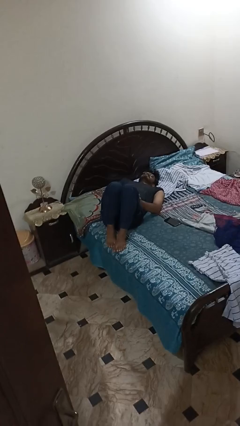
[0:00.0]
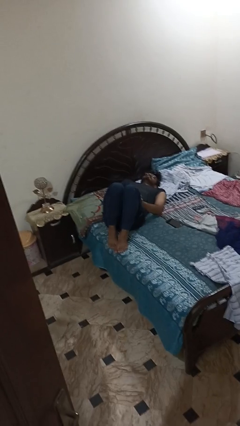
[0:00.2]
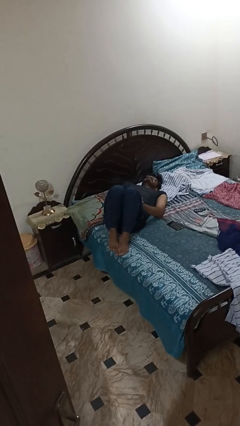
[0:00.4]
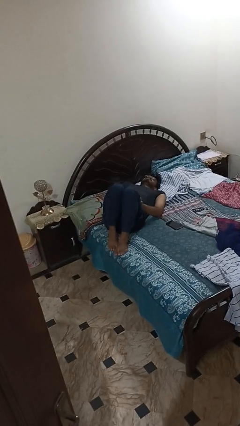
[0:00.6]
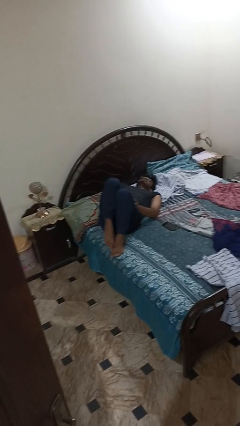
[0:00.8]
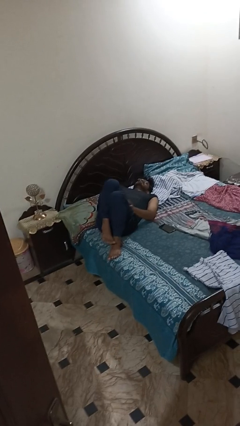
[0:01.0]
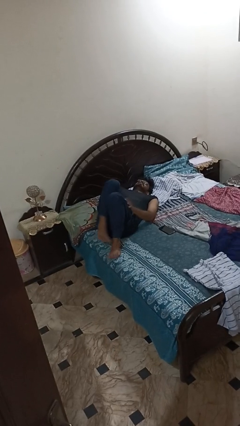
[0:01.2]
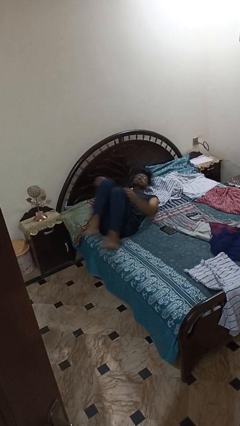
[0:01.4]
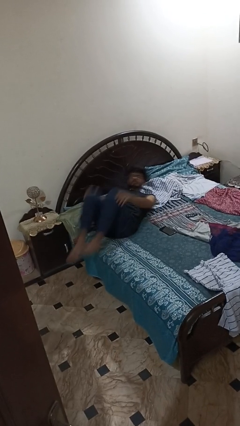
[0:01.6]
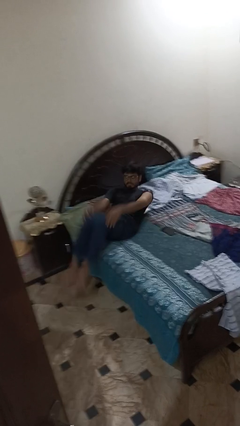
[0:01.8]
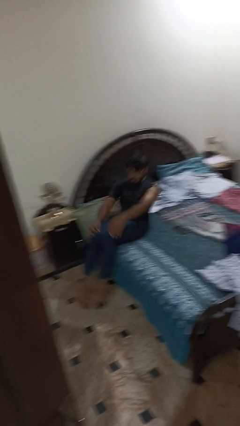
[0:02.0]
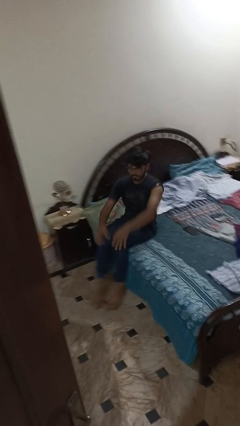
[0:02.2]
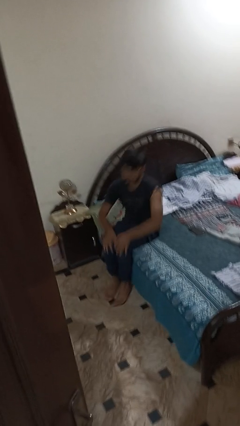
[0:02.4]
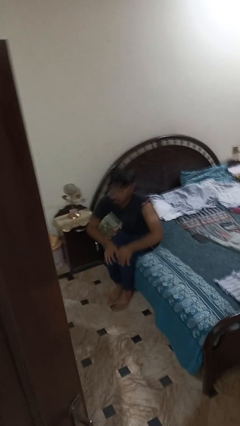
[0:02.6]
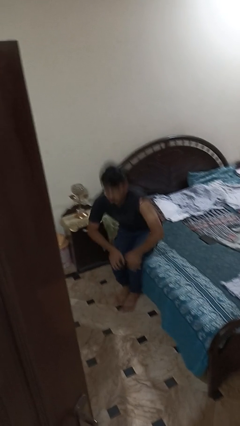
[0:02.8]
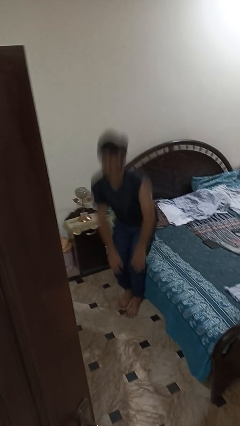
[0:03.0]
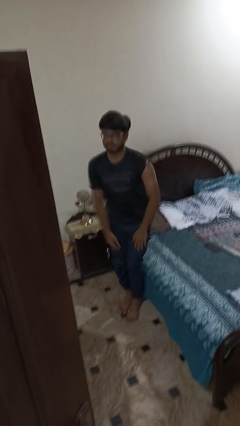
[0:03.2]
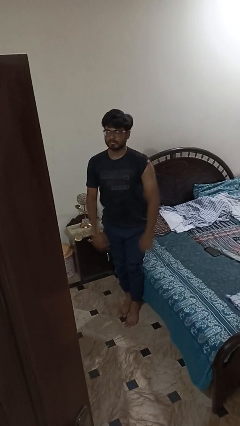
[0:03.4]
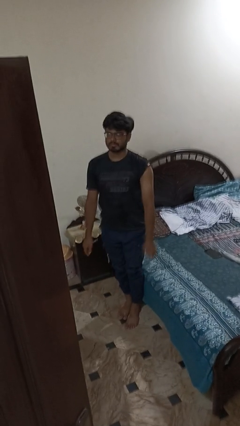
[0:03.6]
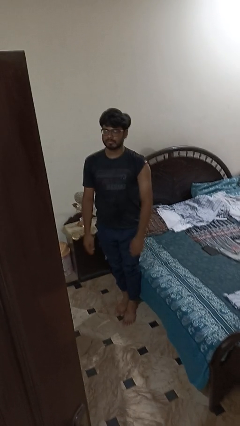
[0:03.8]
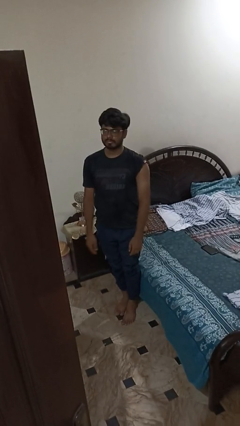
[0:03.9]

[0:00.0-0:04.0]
person stands up

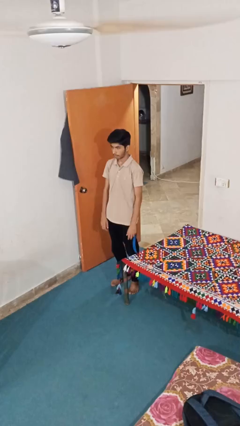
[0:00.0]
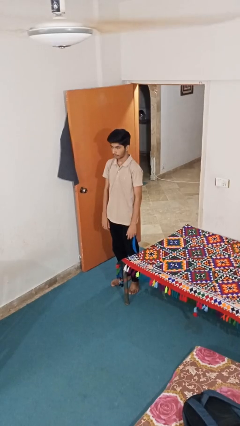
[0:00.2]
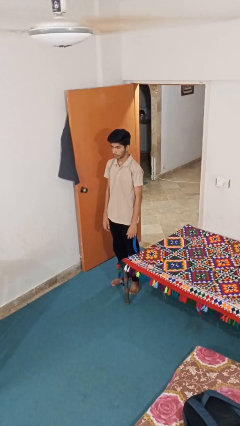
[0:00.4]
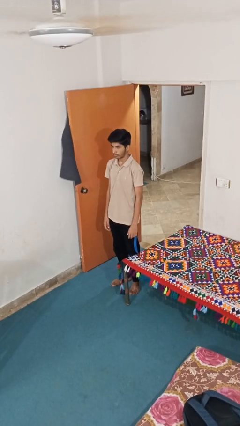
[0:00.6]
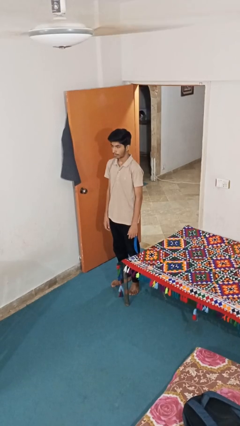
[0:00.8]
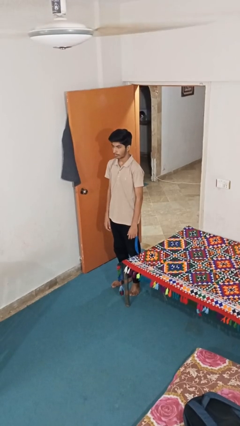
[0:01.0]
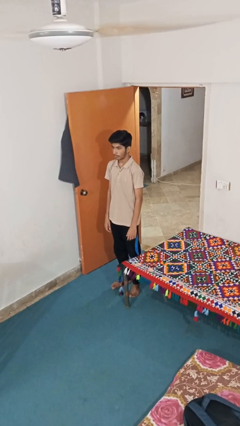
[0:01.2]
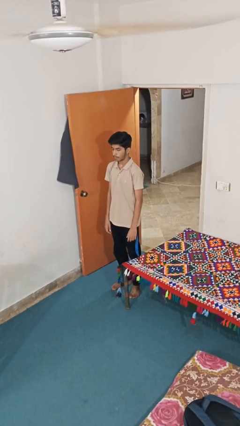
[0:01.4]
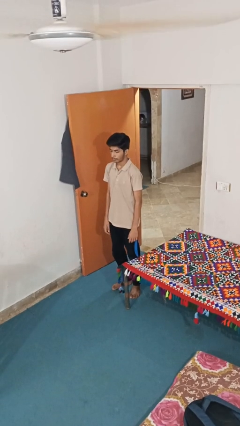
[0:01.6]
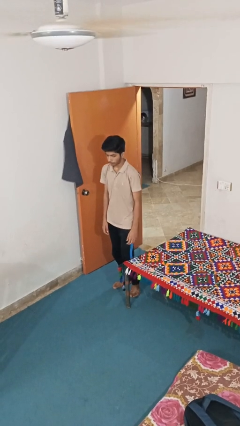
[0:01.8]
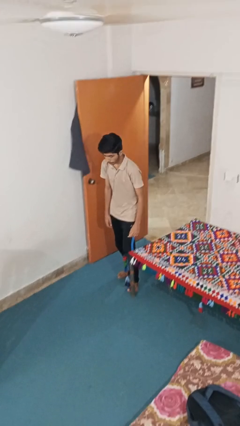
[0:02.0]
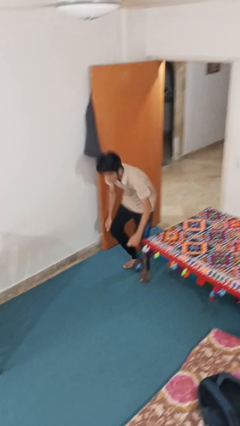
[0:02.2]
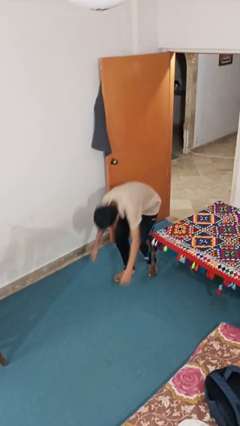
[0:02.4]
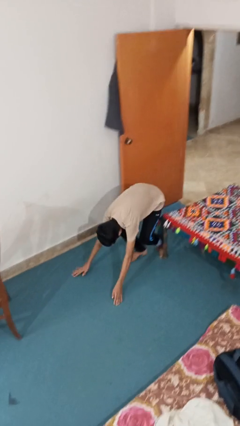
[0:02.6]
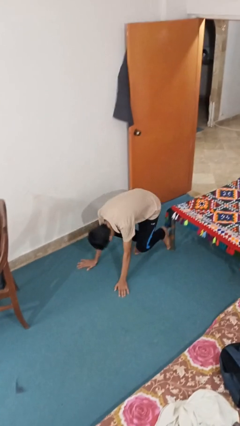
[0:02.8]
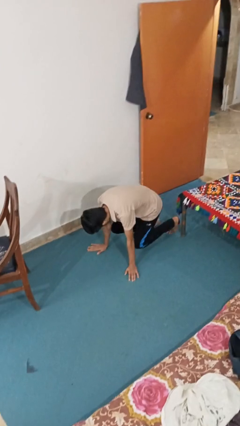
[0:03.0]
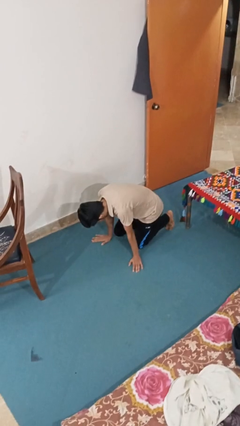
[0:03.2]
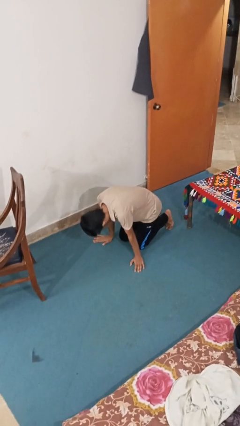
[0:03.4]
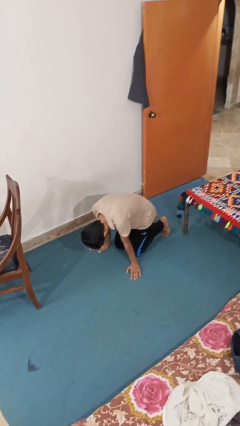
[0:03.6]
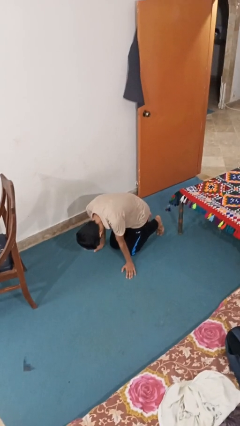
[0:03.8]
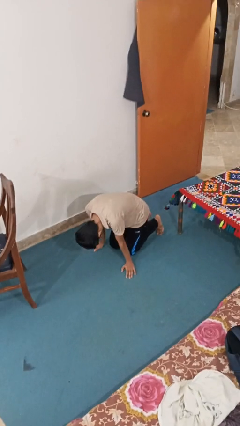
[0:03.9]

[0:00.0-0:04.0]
person trips on object on floor

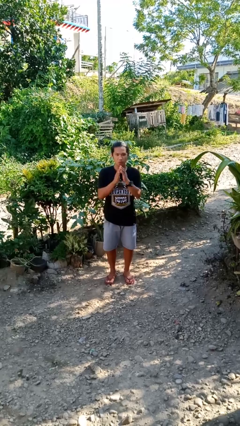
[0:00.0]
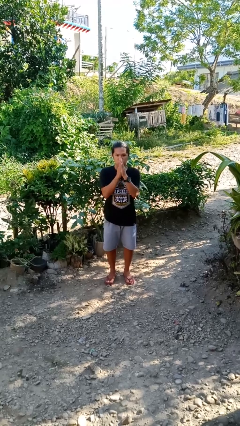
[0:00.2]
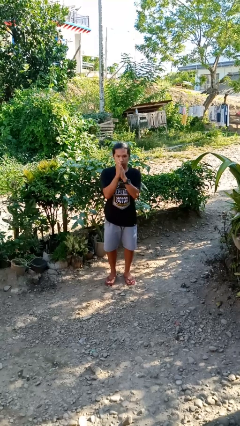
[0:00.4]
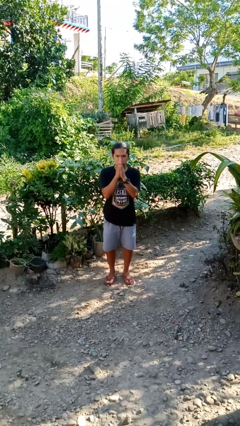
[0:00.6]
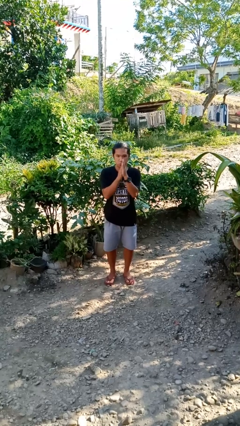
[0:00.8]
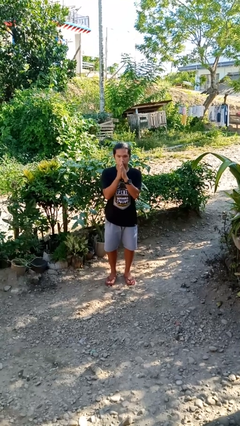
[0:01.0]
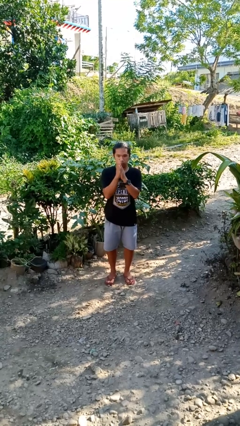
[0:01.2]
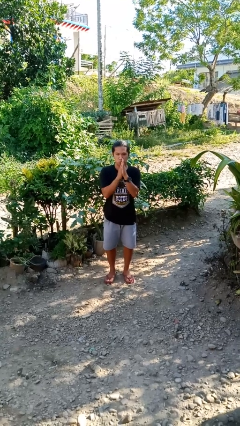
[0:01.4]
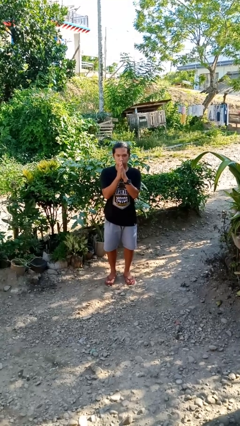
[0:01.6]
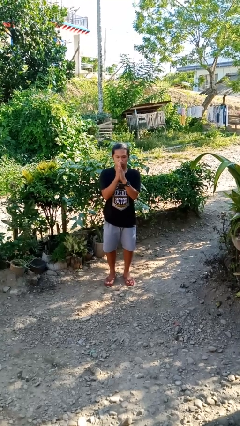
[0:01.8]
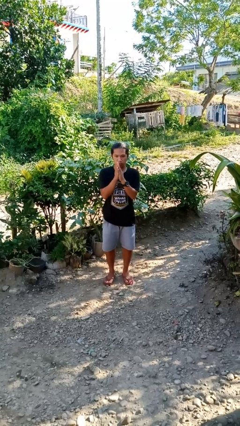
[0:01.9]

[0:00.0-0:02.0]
person blows into hands

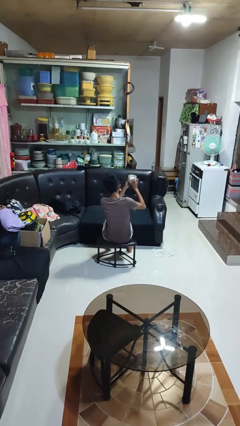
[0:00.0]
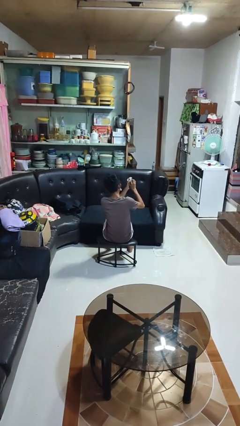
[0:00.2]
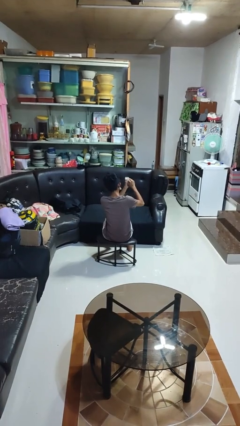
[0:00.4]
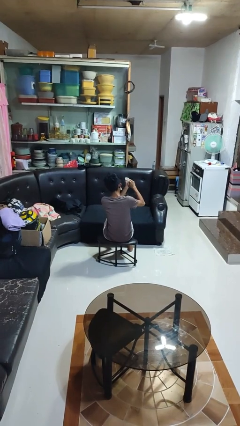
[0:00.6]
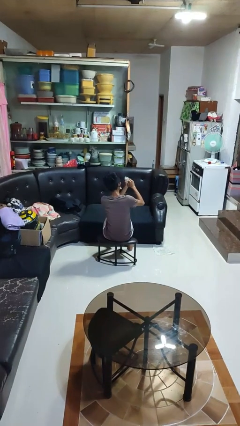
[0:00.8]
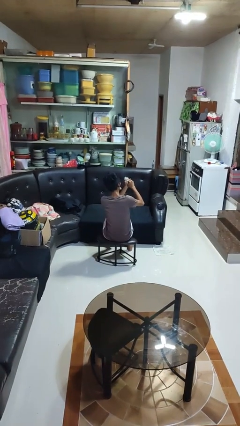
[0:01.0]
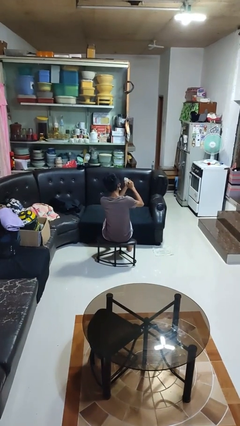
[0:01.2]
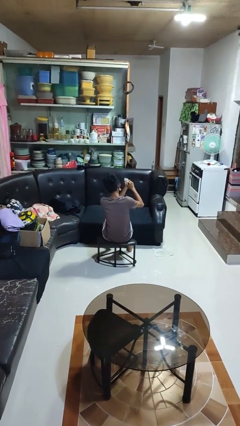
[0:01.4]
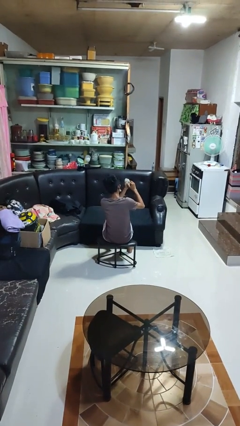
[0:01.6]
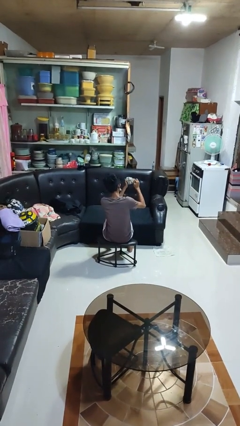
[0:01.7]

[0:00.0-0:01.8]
person crumples paper

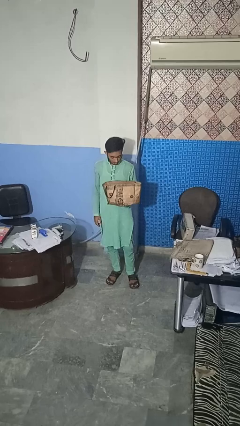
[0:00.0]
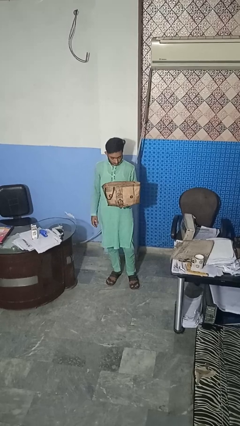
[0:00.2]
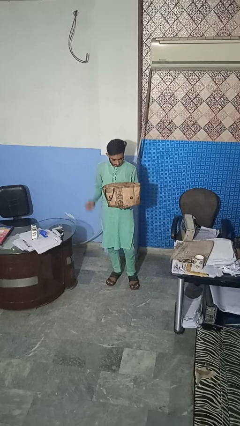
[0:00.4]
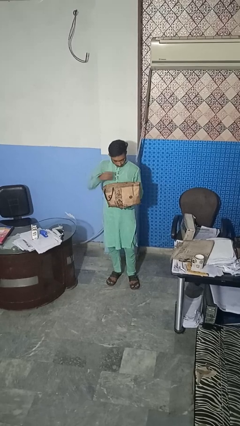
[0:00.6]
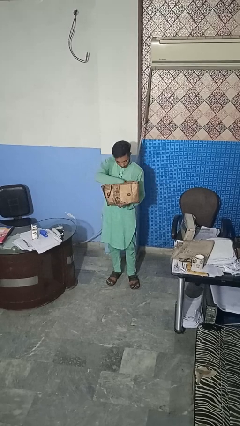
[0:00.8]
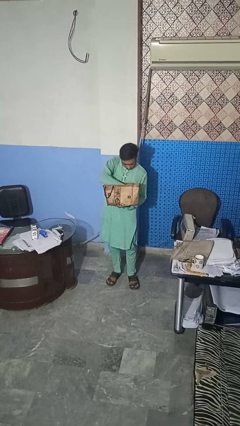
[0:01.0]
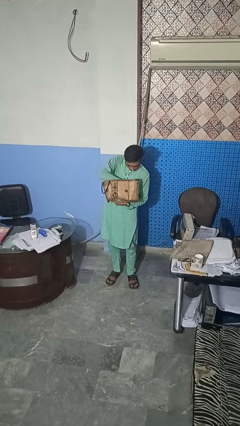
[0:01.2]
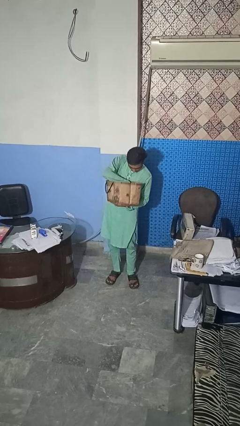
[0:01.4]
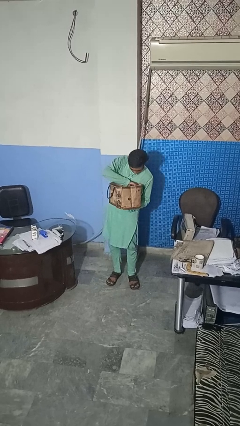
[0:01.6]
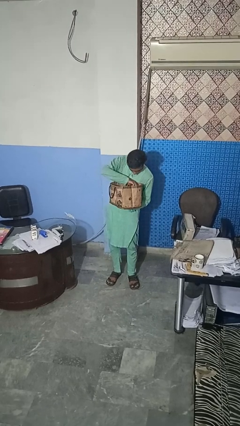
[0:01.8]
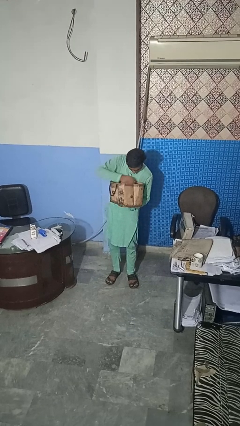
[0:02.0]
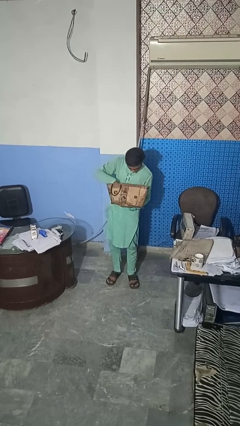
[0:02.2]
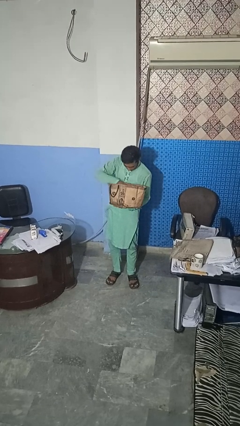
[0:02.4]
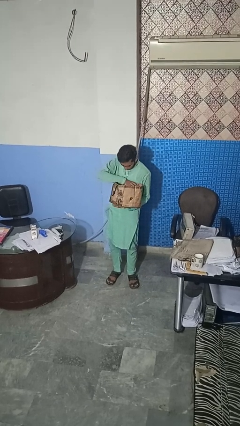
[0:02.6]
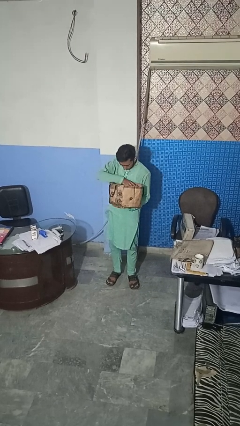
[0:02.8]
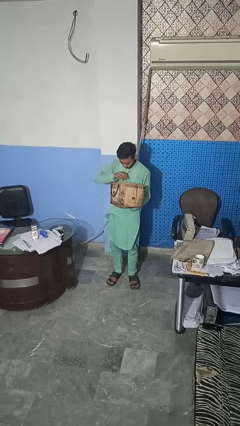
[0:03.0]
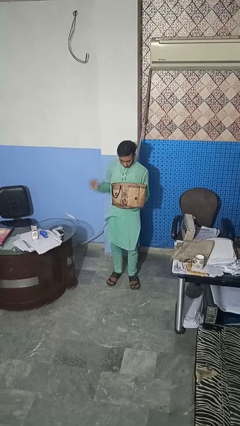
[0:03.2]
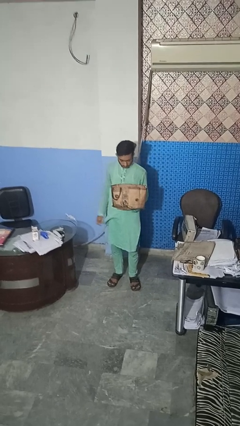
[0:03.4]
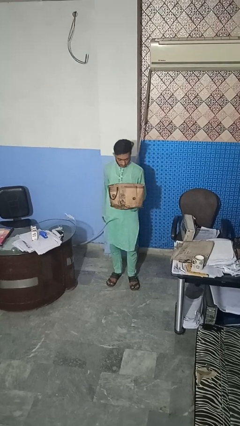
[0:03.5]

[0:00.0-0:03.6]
person searches in bag

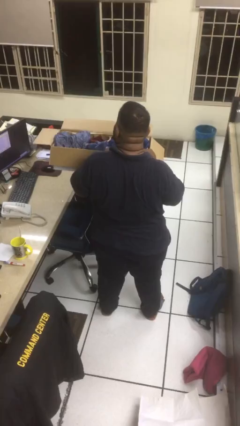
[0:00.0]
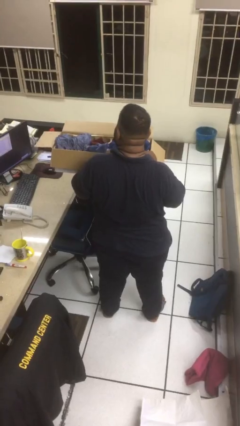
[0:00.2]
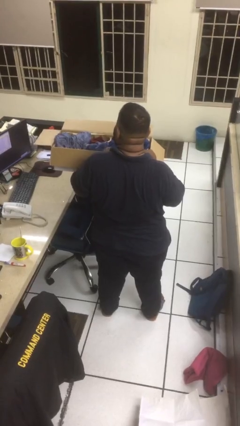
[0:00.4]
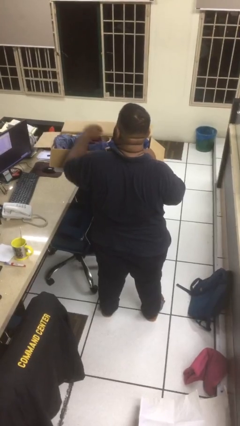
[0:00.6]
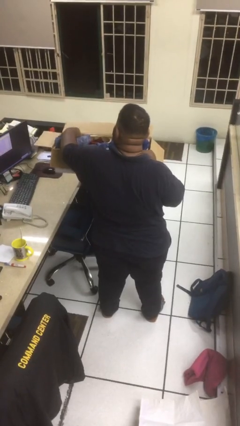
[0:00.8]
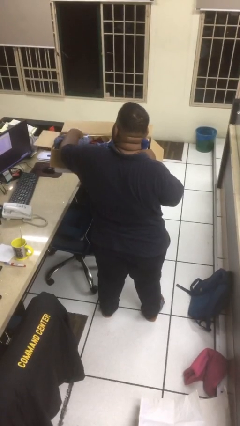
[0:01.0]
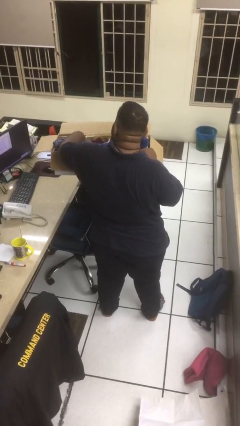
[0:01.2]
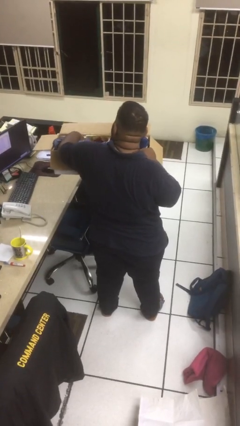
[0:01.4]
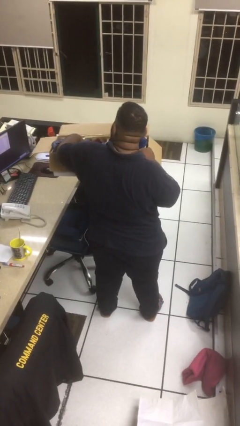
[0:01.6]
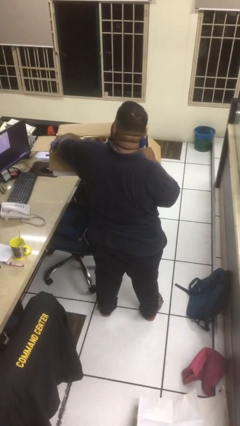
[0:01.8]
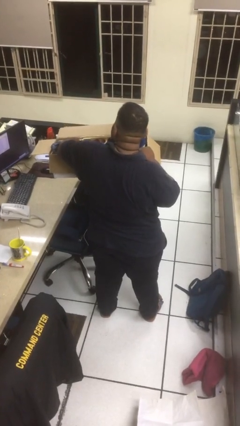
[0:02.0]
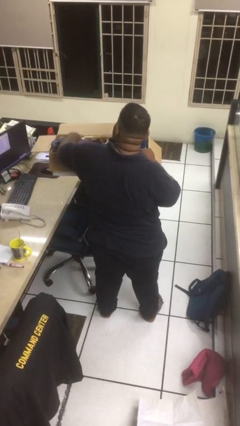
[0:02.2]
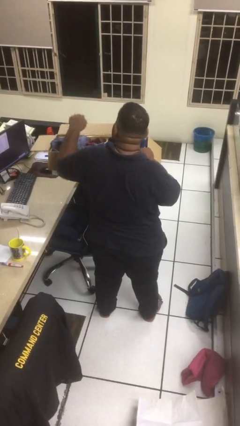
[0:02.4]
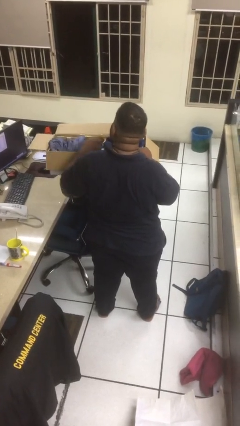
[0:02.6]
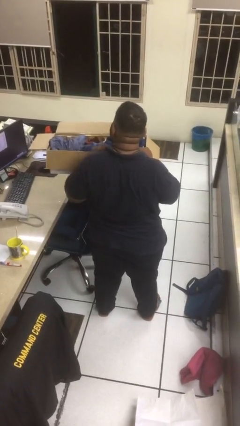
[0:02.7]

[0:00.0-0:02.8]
person searches in box
